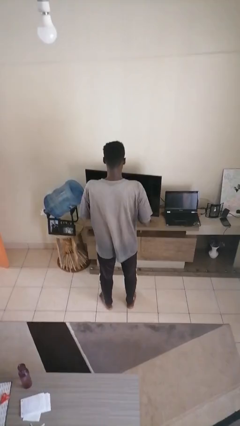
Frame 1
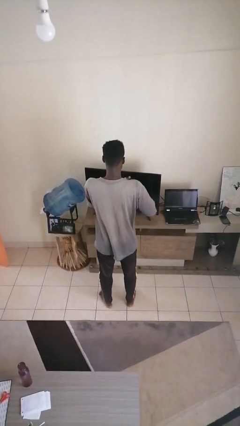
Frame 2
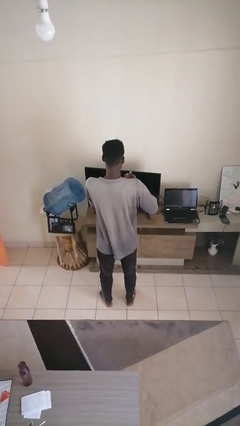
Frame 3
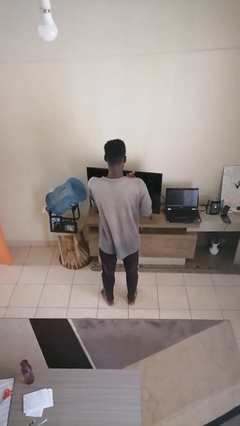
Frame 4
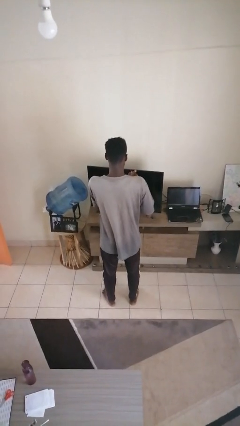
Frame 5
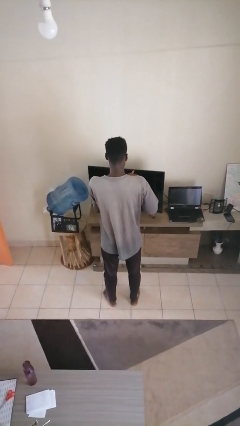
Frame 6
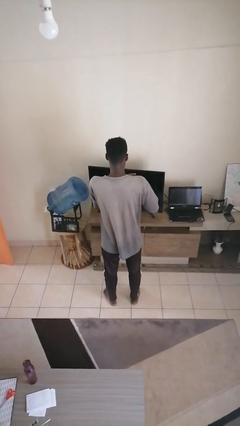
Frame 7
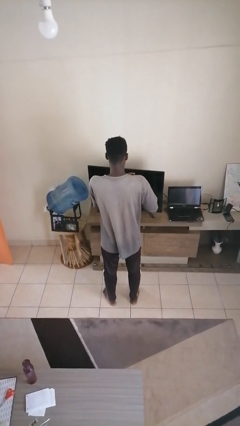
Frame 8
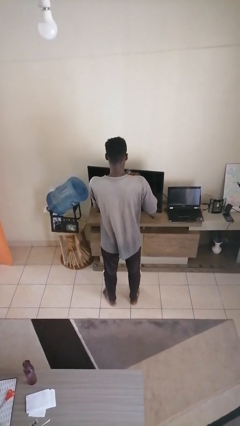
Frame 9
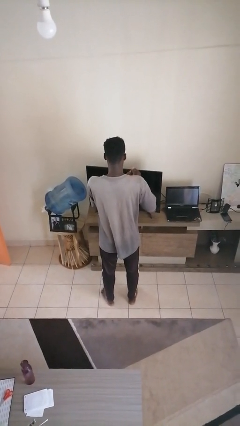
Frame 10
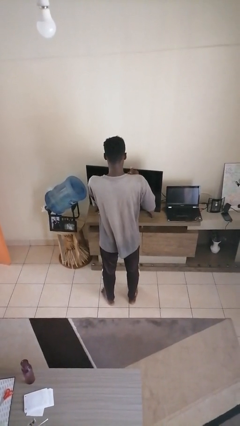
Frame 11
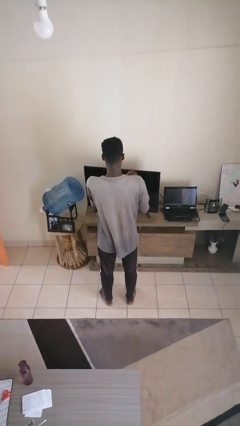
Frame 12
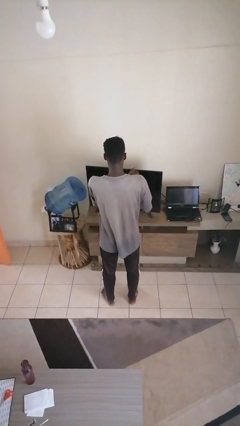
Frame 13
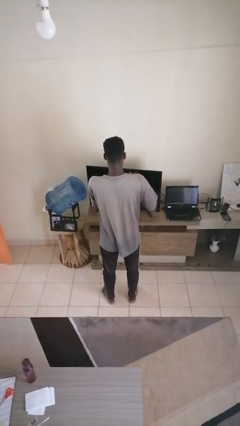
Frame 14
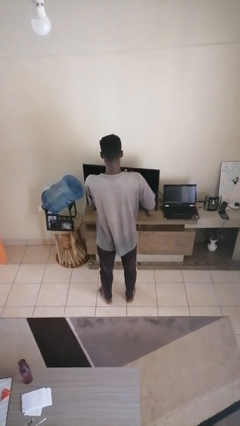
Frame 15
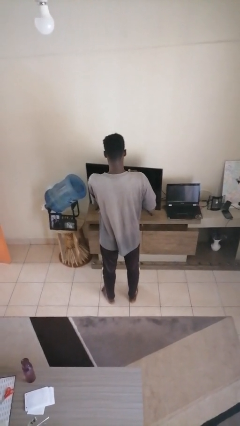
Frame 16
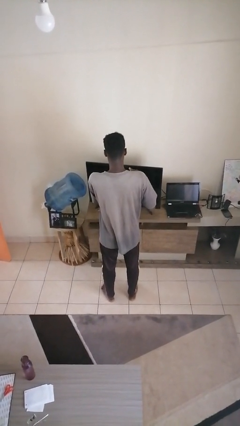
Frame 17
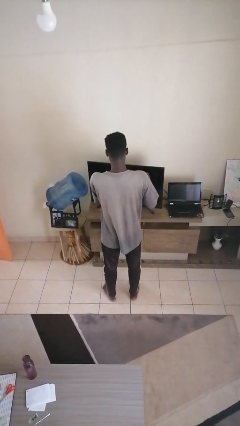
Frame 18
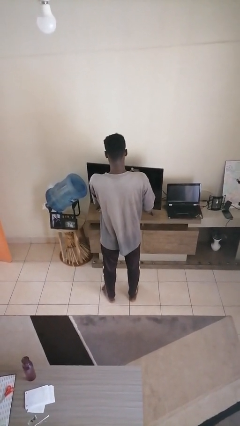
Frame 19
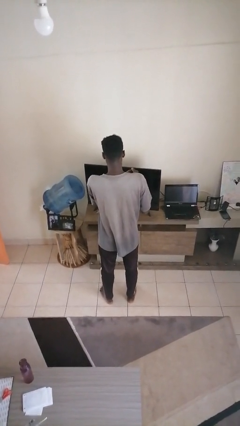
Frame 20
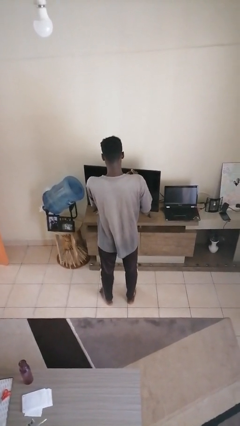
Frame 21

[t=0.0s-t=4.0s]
person cracks knuckles

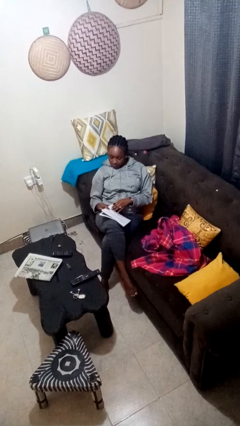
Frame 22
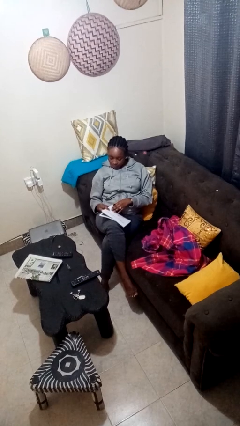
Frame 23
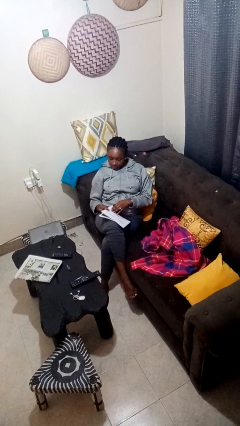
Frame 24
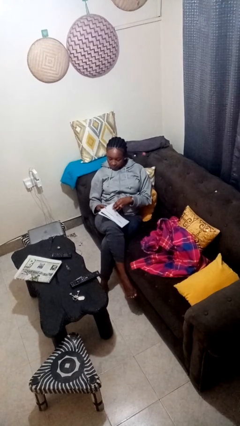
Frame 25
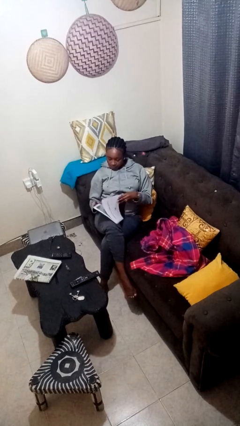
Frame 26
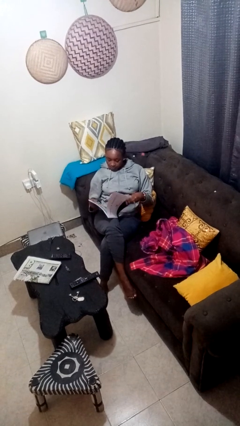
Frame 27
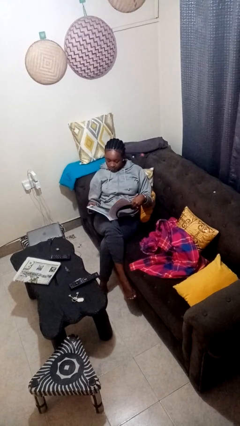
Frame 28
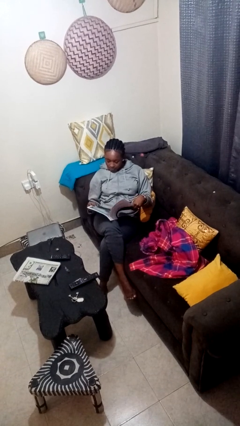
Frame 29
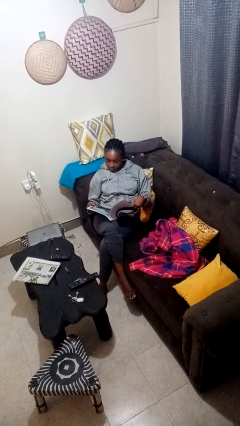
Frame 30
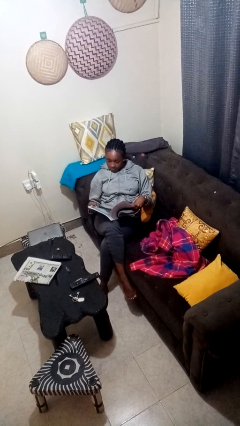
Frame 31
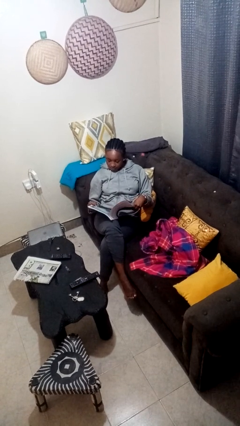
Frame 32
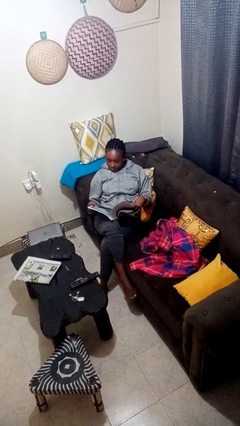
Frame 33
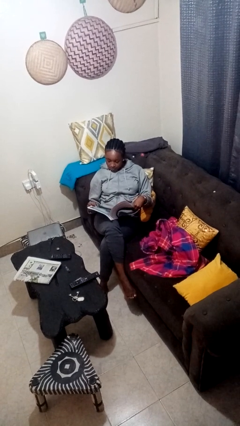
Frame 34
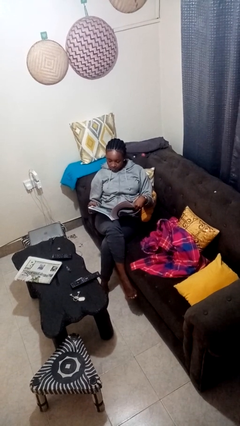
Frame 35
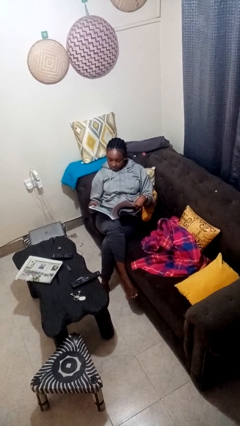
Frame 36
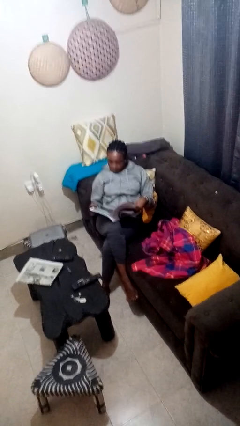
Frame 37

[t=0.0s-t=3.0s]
person reads magazine

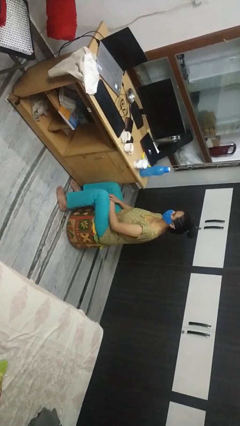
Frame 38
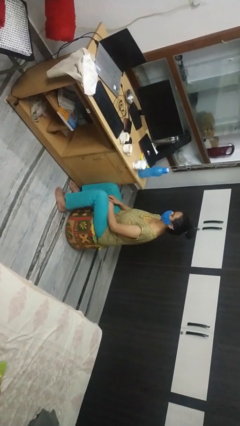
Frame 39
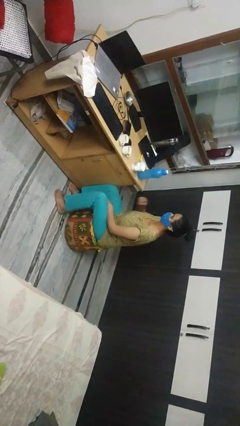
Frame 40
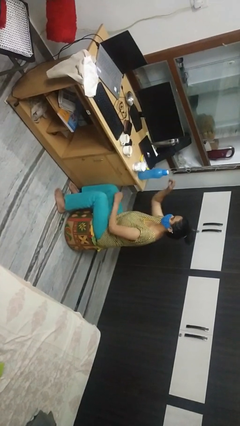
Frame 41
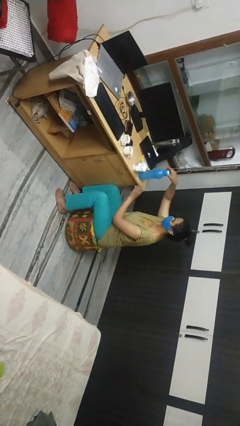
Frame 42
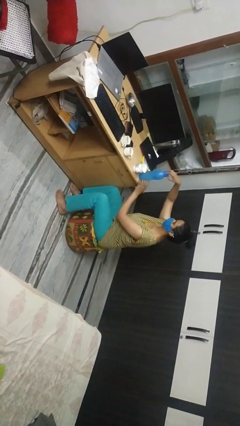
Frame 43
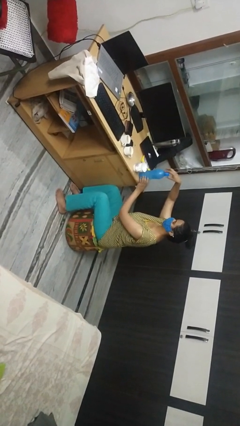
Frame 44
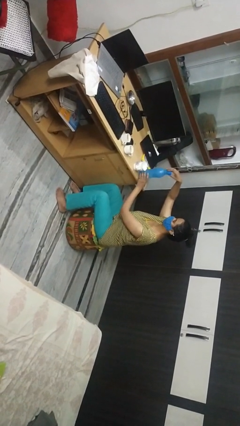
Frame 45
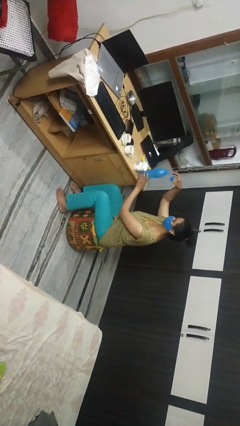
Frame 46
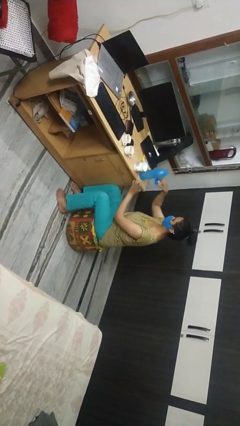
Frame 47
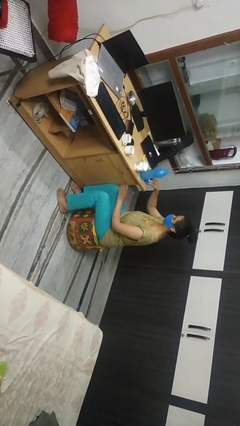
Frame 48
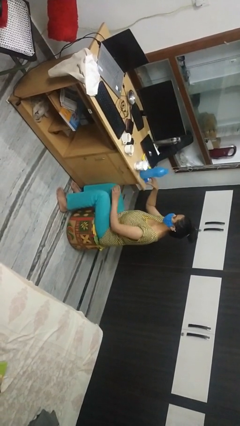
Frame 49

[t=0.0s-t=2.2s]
person unscrews lid from bottle

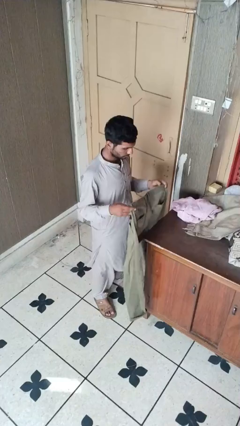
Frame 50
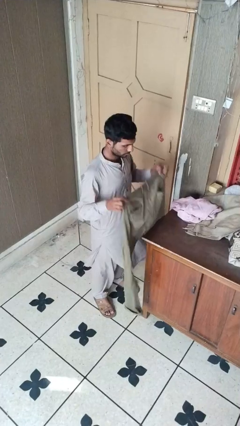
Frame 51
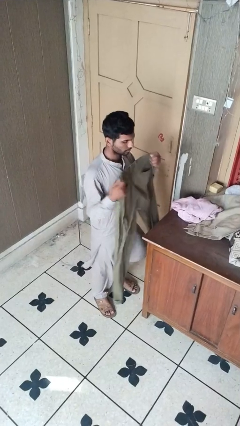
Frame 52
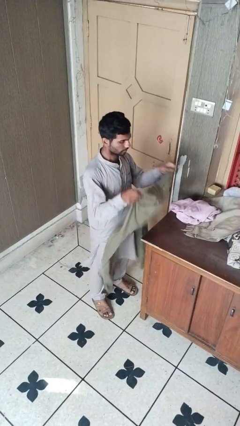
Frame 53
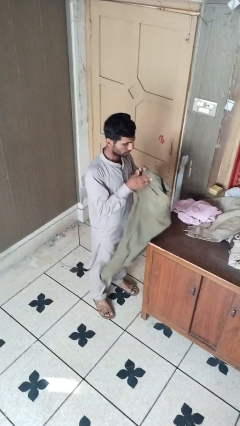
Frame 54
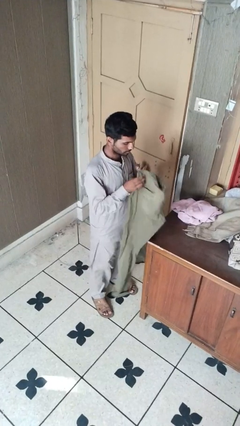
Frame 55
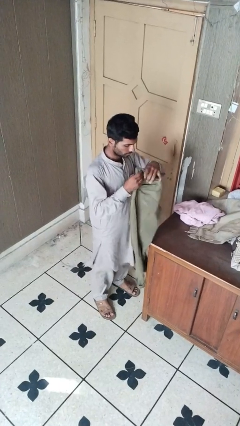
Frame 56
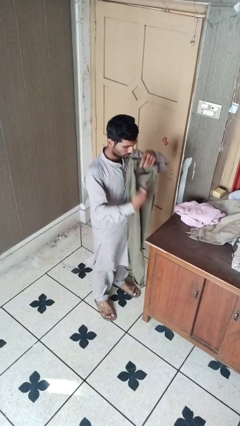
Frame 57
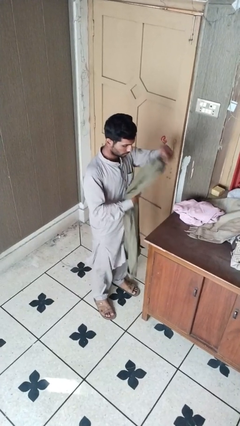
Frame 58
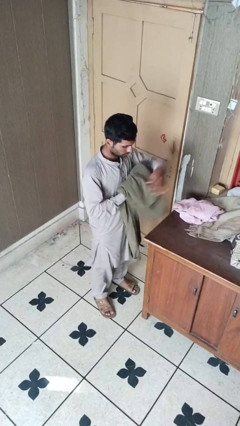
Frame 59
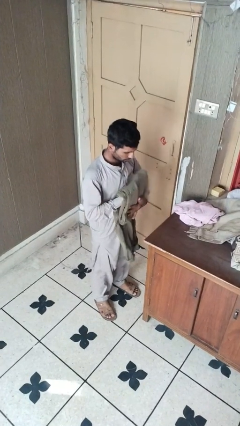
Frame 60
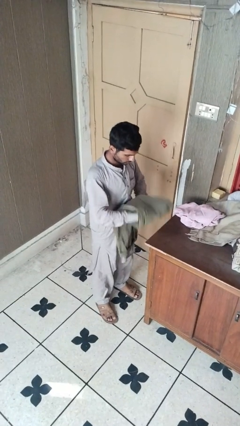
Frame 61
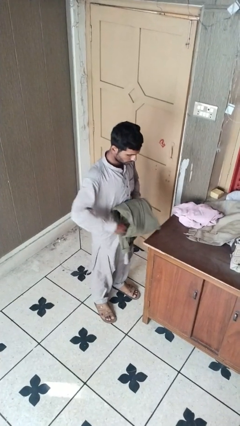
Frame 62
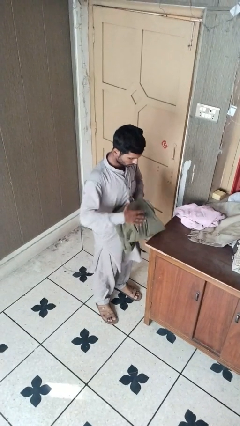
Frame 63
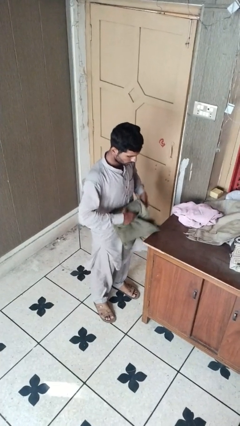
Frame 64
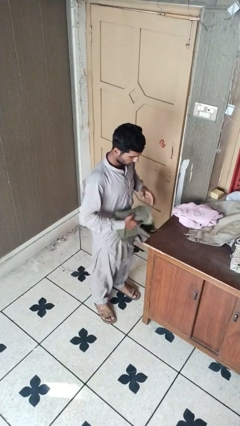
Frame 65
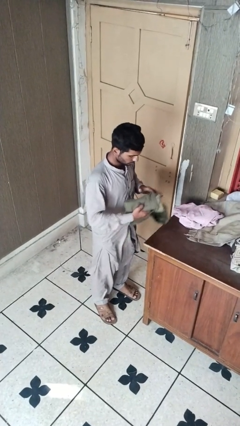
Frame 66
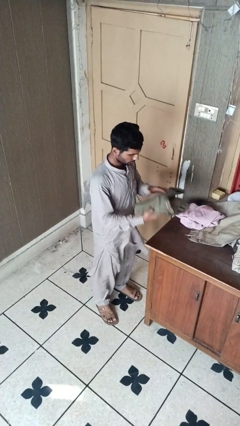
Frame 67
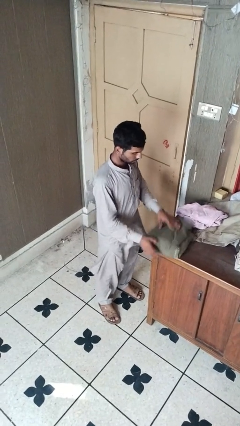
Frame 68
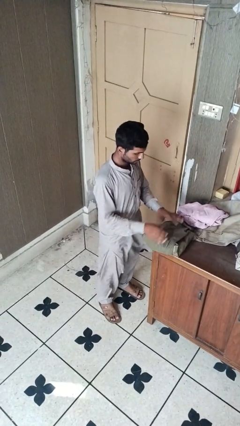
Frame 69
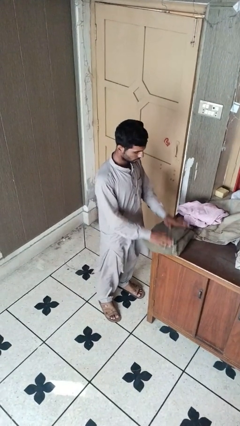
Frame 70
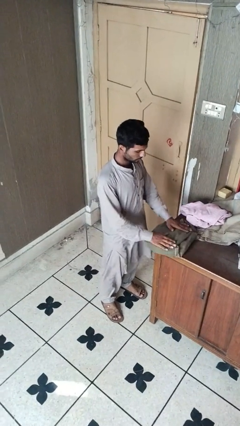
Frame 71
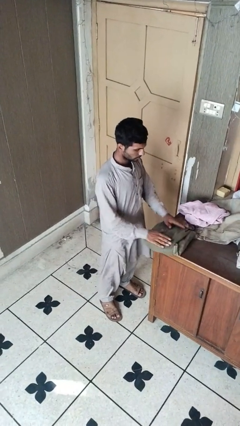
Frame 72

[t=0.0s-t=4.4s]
person folds pants

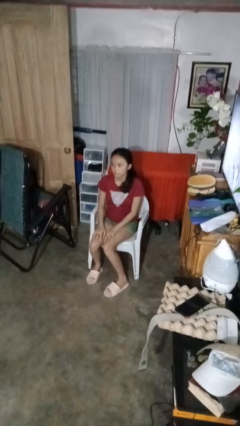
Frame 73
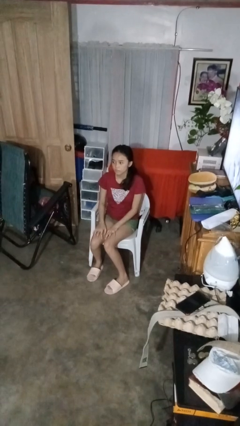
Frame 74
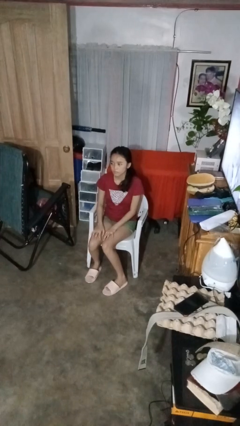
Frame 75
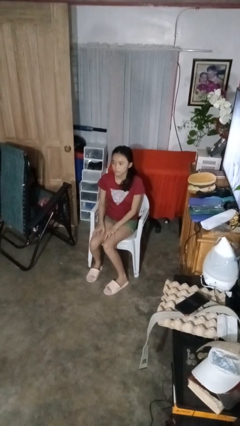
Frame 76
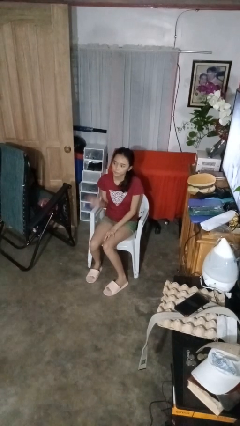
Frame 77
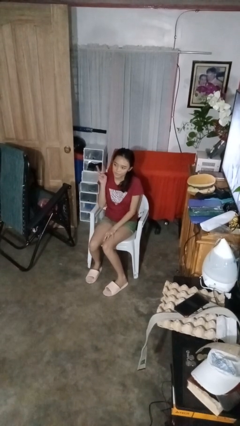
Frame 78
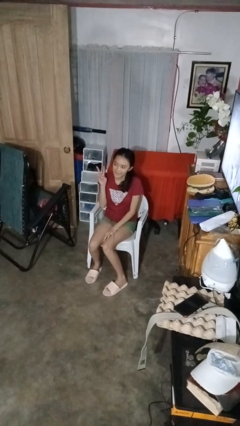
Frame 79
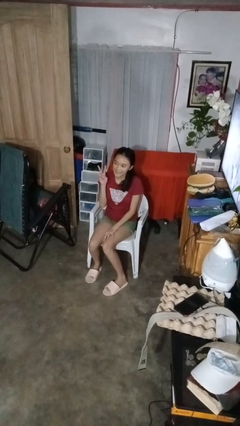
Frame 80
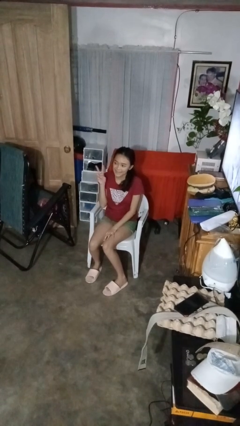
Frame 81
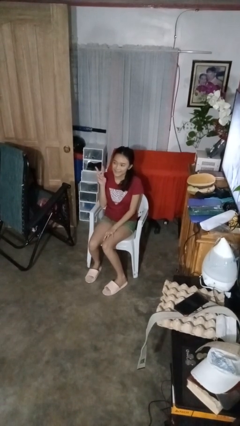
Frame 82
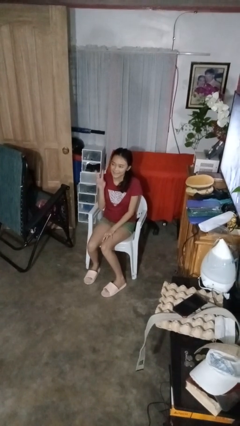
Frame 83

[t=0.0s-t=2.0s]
person gestures peace

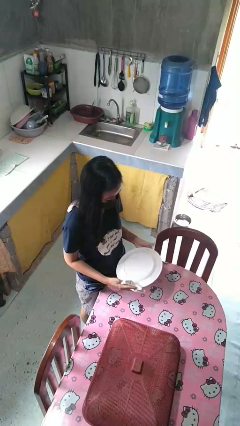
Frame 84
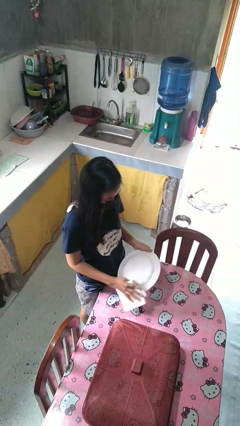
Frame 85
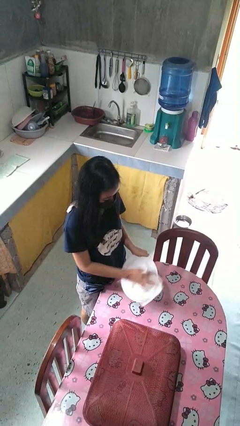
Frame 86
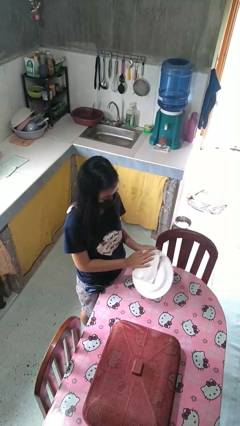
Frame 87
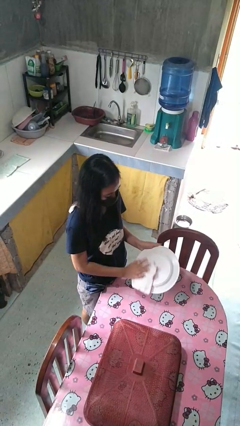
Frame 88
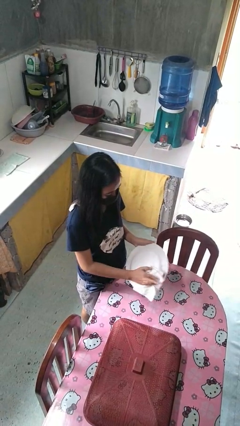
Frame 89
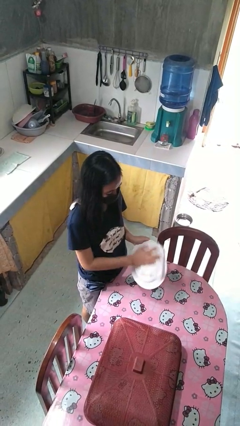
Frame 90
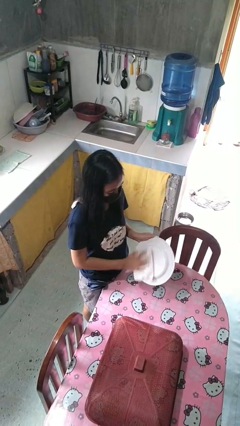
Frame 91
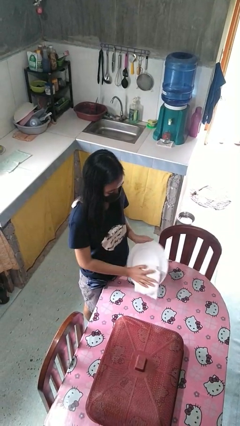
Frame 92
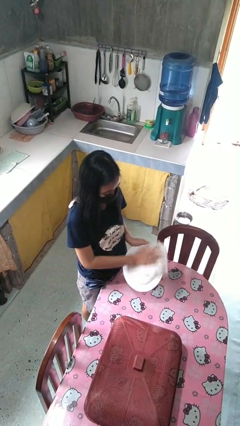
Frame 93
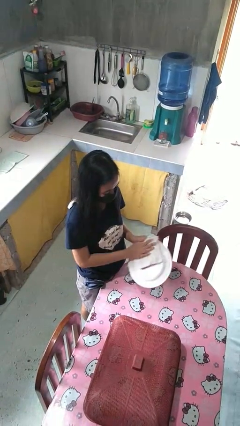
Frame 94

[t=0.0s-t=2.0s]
person dries dish
